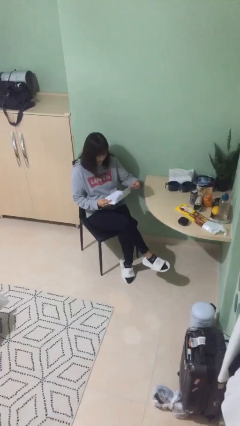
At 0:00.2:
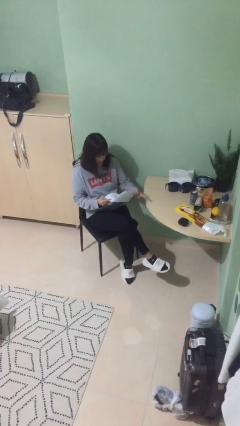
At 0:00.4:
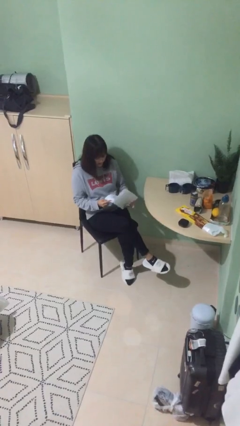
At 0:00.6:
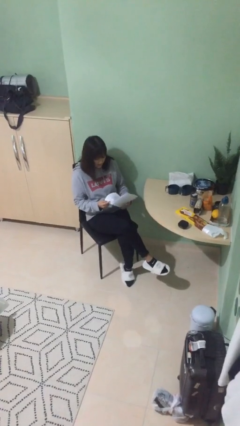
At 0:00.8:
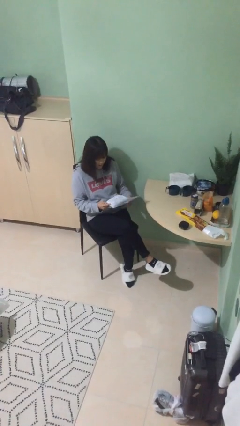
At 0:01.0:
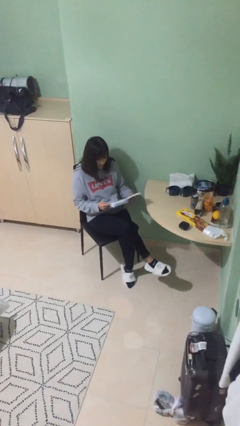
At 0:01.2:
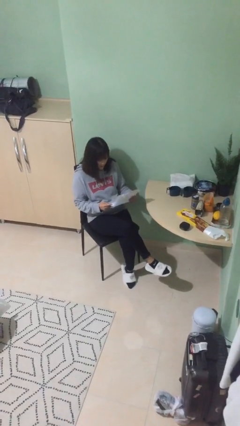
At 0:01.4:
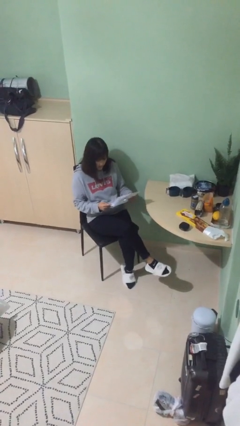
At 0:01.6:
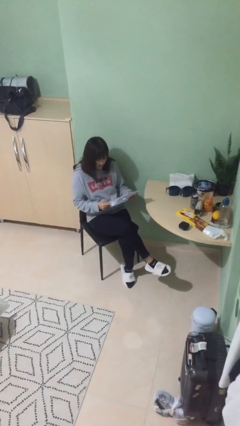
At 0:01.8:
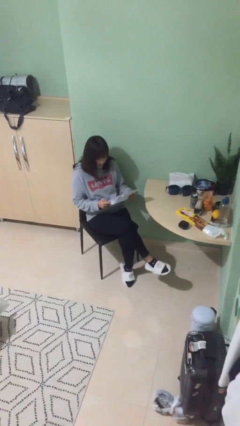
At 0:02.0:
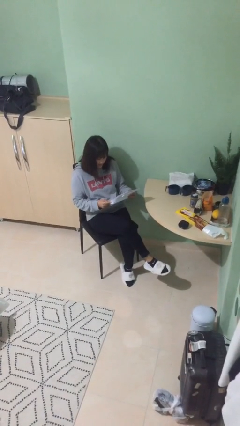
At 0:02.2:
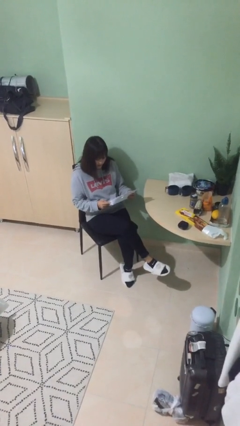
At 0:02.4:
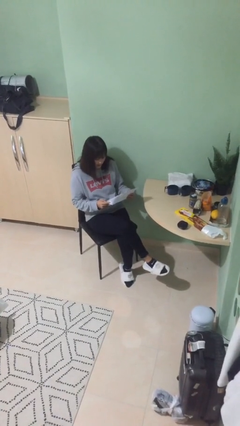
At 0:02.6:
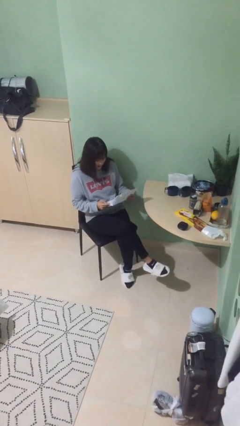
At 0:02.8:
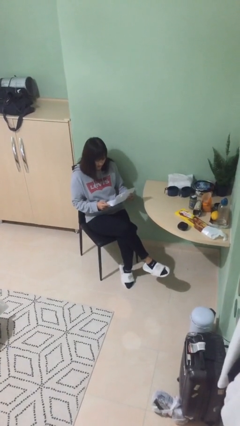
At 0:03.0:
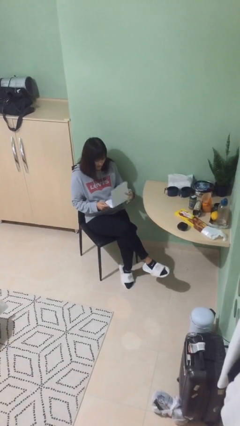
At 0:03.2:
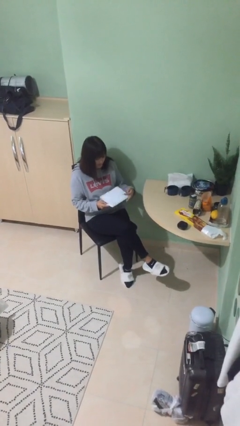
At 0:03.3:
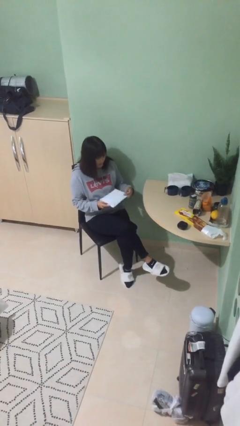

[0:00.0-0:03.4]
person reads document

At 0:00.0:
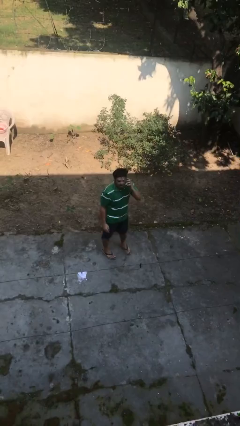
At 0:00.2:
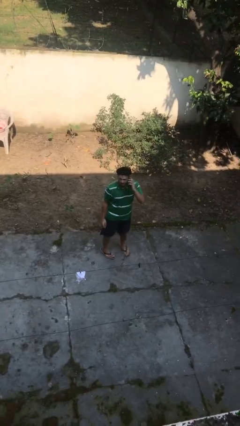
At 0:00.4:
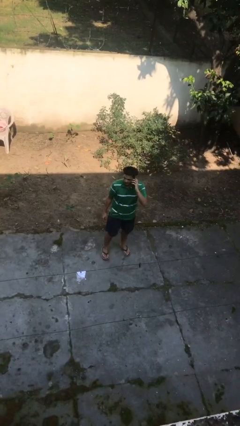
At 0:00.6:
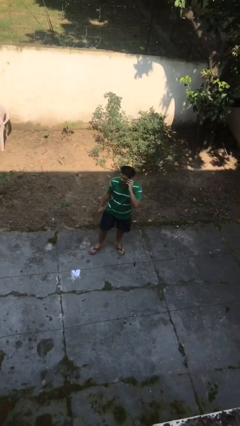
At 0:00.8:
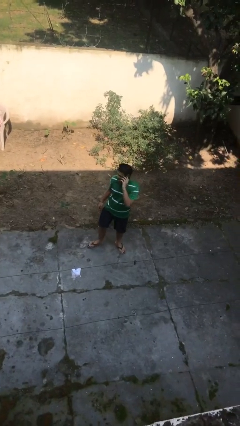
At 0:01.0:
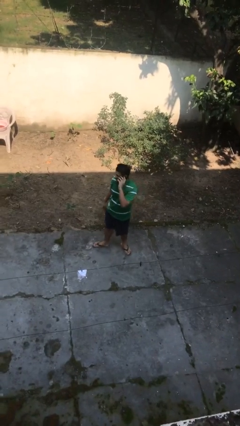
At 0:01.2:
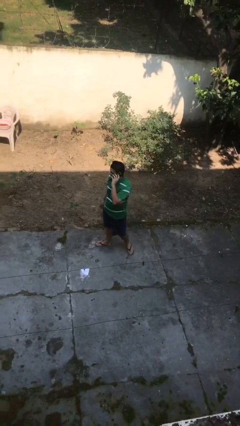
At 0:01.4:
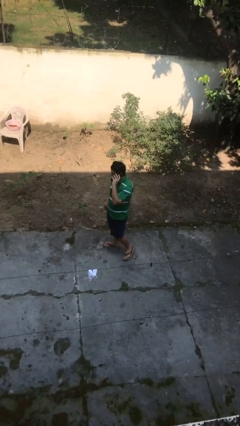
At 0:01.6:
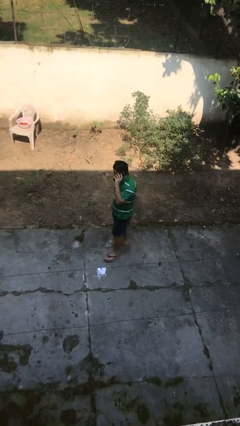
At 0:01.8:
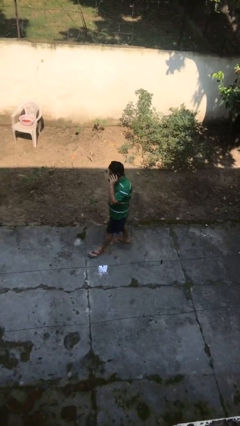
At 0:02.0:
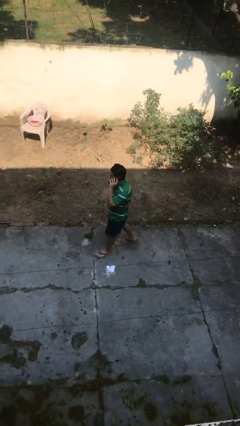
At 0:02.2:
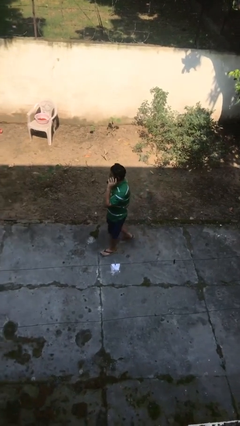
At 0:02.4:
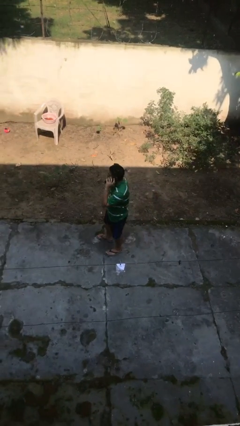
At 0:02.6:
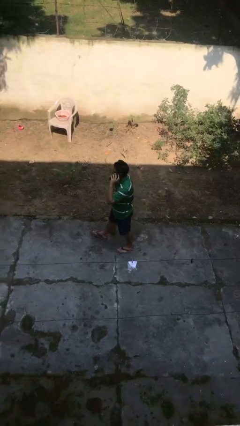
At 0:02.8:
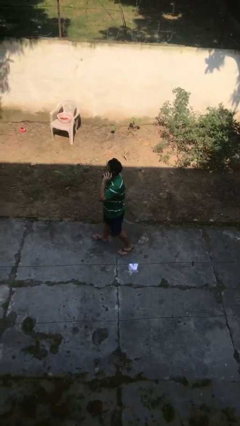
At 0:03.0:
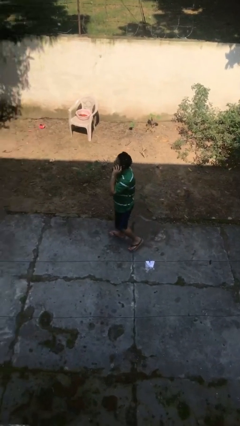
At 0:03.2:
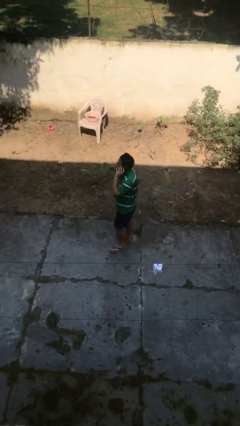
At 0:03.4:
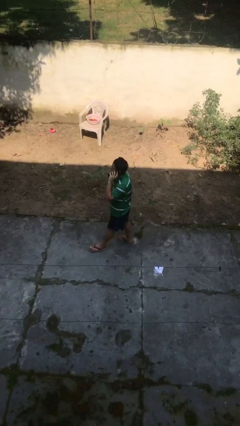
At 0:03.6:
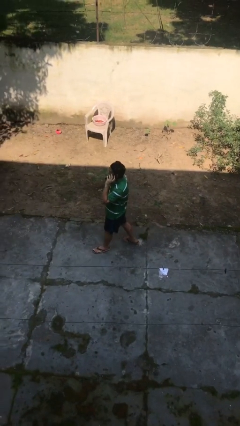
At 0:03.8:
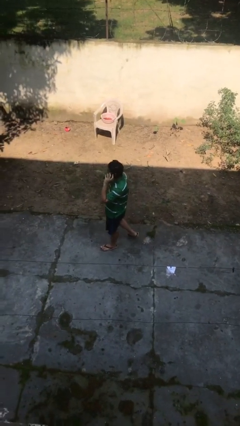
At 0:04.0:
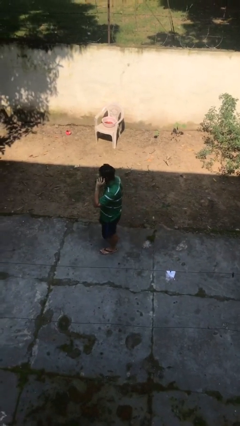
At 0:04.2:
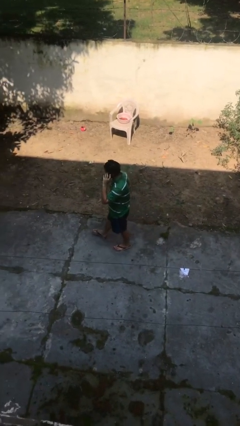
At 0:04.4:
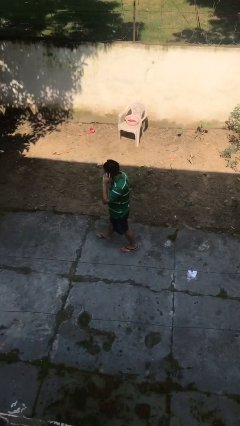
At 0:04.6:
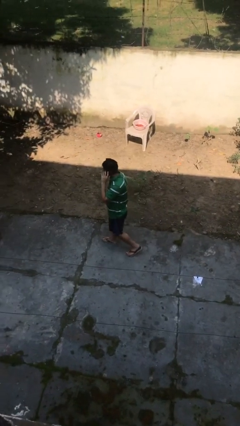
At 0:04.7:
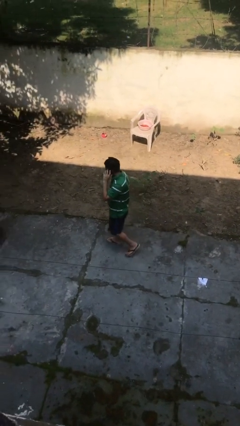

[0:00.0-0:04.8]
person talks on phone

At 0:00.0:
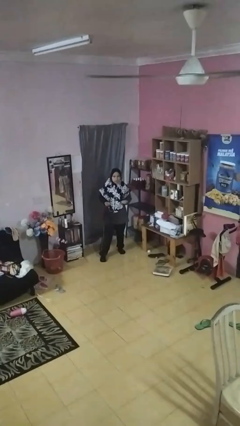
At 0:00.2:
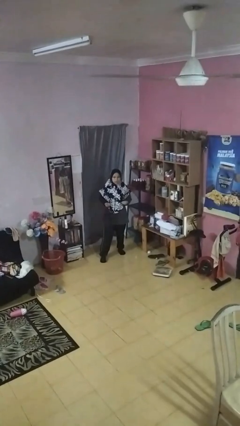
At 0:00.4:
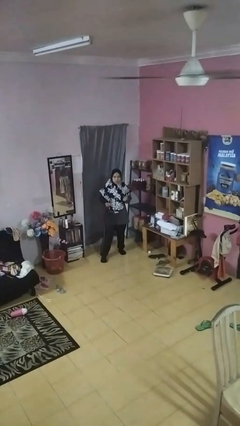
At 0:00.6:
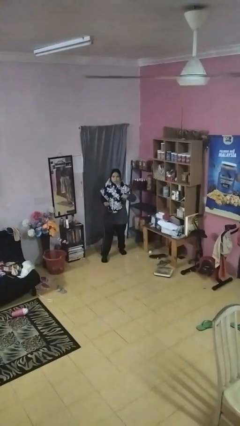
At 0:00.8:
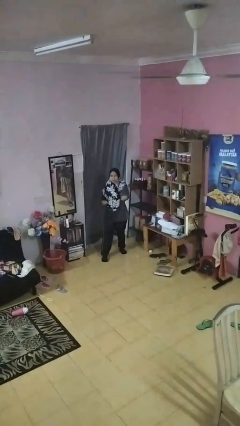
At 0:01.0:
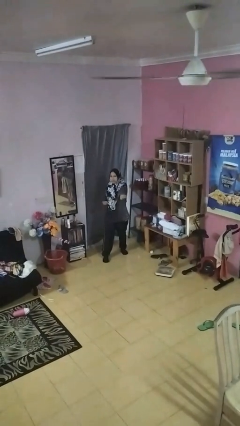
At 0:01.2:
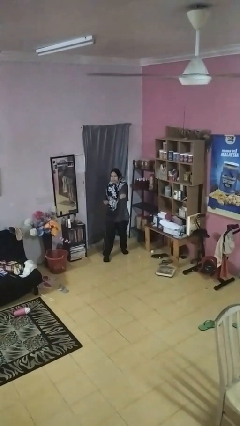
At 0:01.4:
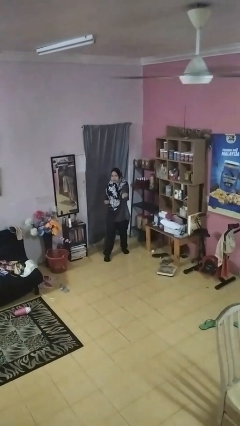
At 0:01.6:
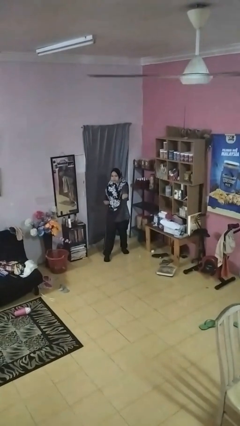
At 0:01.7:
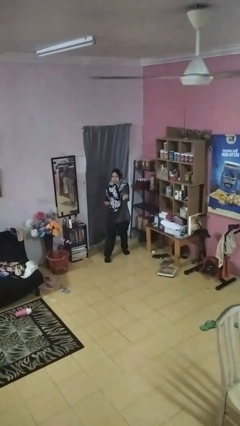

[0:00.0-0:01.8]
person punches

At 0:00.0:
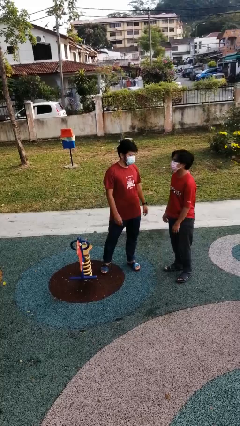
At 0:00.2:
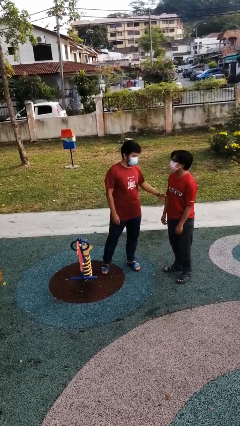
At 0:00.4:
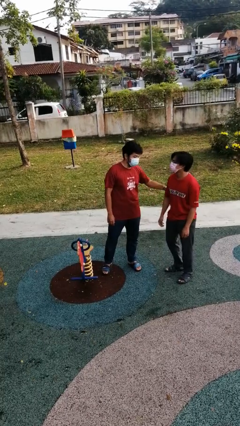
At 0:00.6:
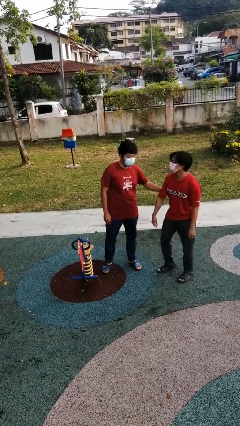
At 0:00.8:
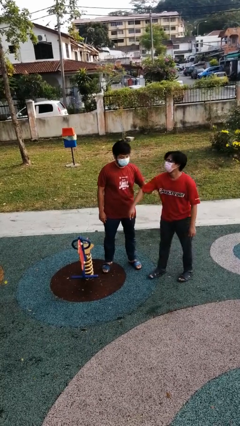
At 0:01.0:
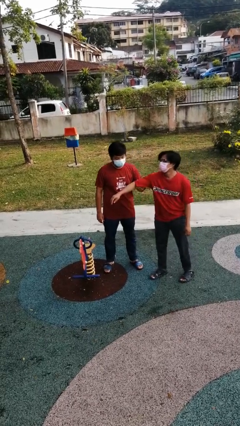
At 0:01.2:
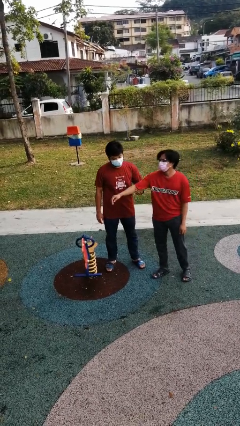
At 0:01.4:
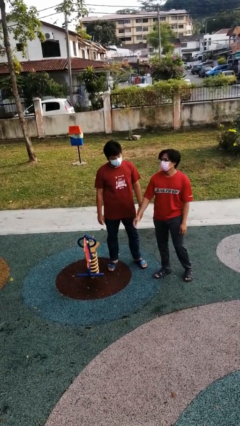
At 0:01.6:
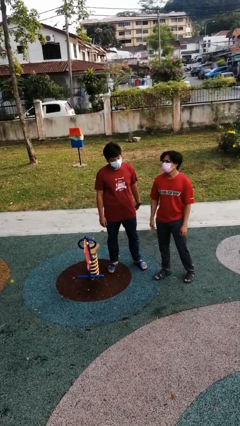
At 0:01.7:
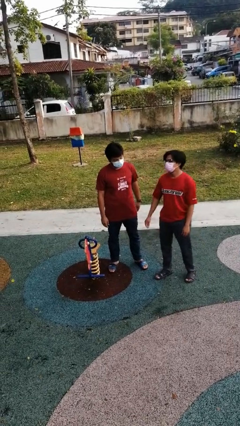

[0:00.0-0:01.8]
person grabs person by bicep

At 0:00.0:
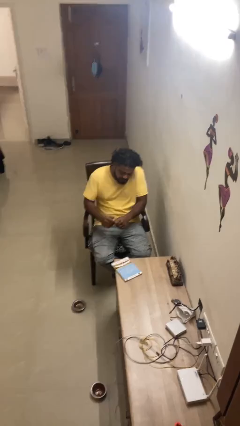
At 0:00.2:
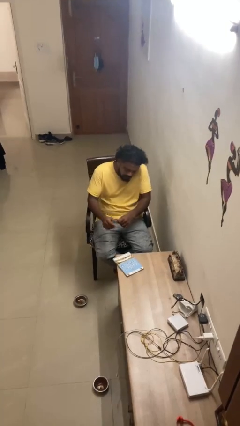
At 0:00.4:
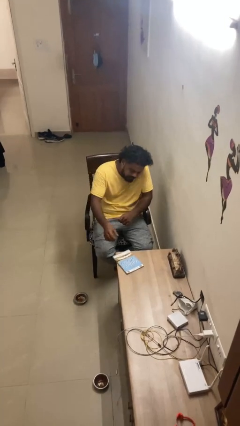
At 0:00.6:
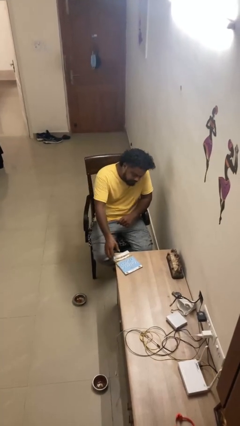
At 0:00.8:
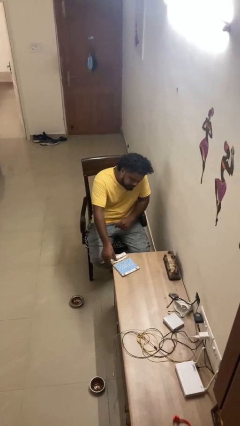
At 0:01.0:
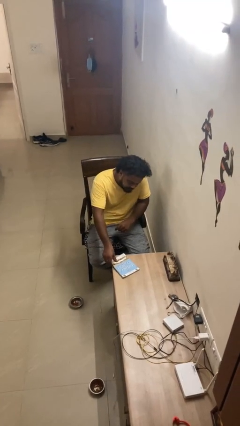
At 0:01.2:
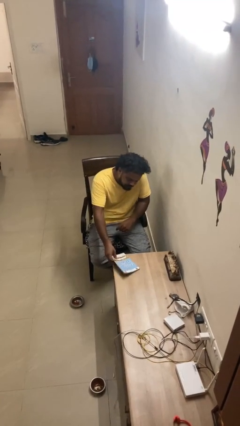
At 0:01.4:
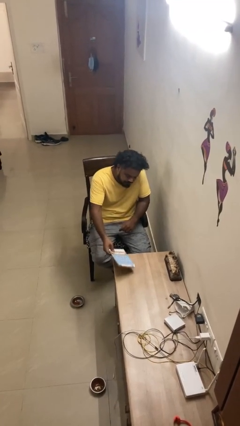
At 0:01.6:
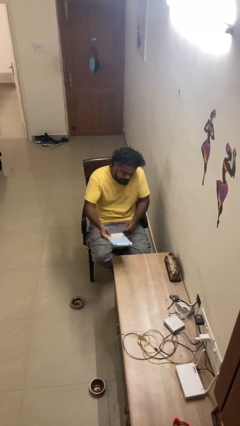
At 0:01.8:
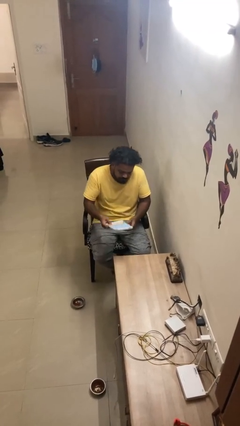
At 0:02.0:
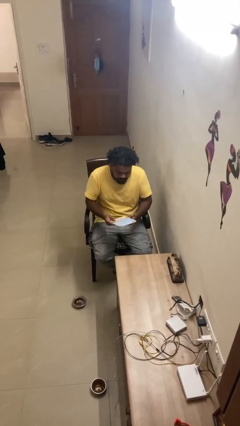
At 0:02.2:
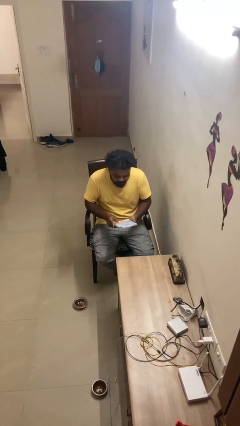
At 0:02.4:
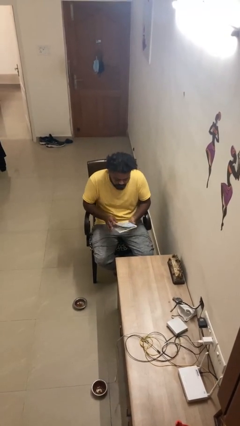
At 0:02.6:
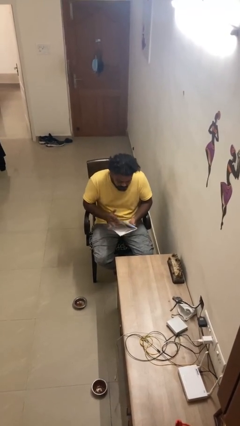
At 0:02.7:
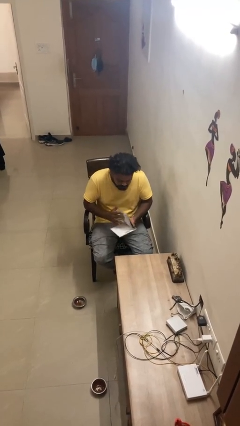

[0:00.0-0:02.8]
person picks up object from table

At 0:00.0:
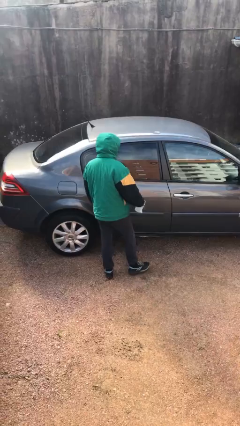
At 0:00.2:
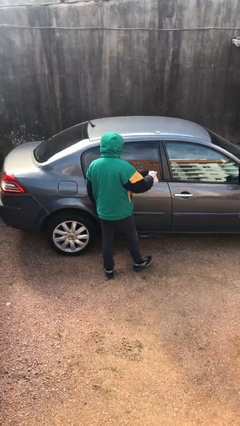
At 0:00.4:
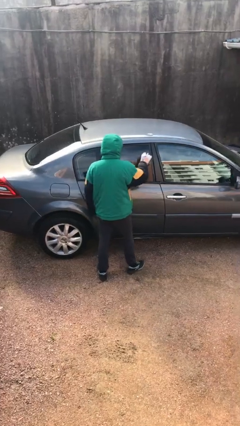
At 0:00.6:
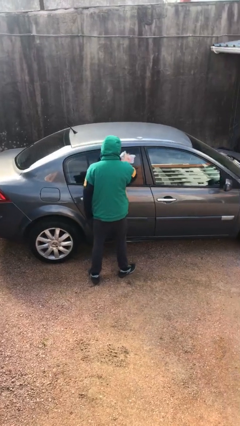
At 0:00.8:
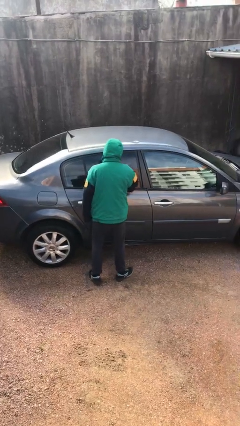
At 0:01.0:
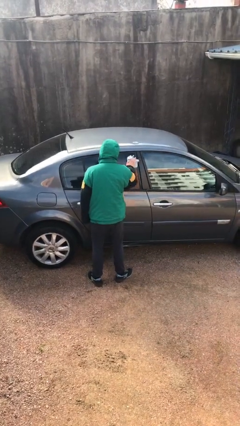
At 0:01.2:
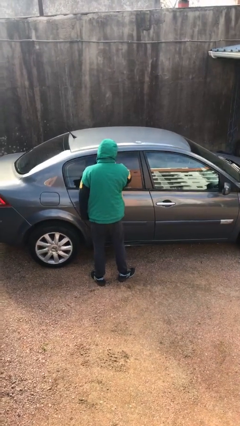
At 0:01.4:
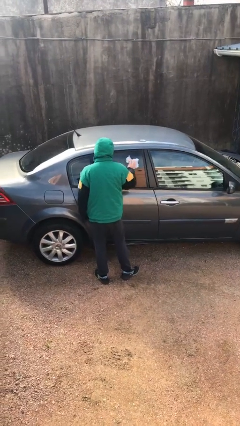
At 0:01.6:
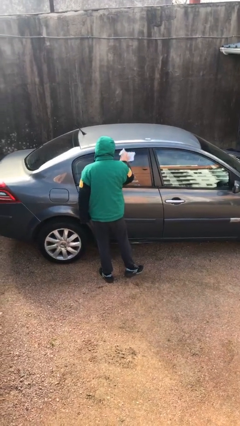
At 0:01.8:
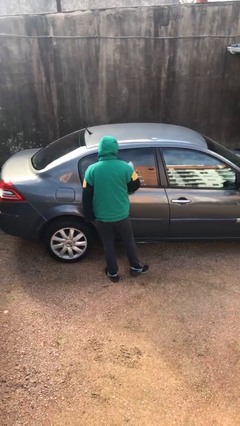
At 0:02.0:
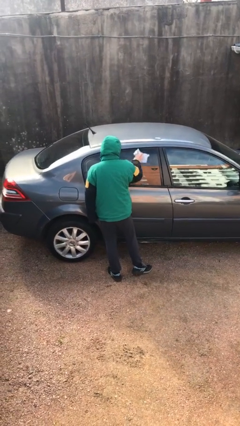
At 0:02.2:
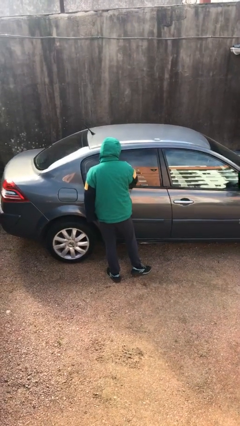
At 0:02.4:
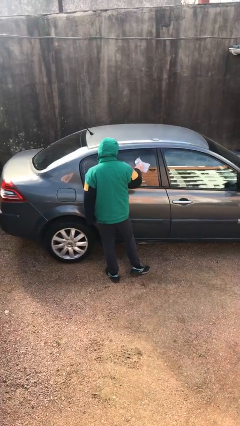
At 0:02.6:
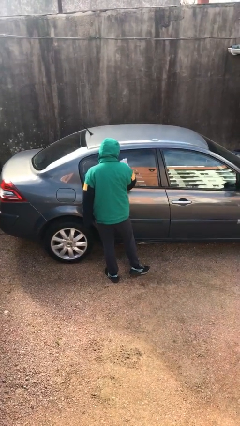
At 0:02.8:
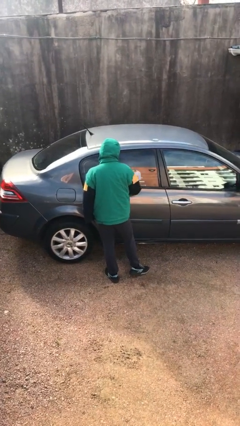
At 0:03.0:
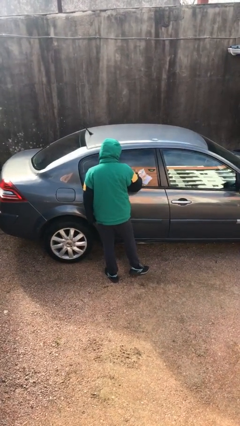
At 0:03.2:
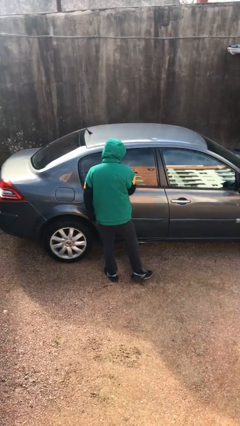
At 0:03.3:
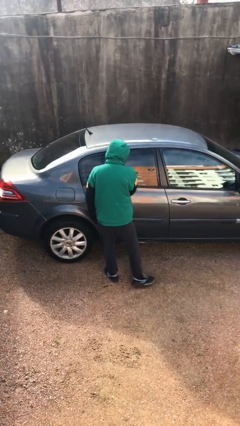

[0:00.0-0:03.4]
person polishes car with rag
